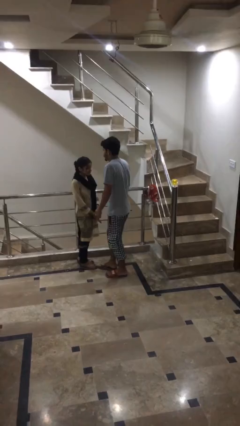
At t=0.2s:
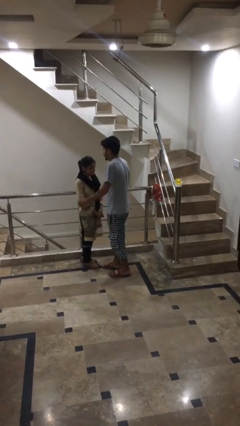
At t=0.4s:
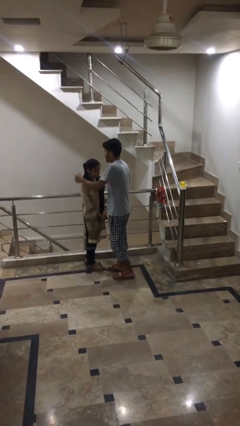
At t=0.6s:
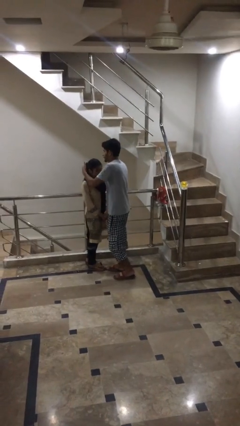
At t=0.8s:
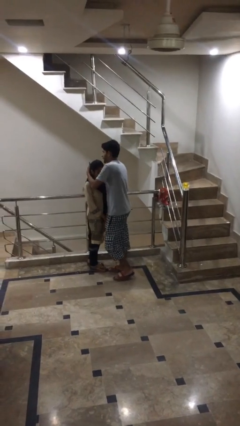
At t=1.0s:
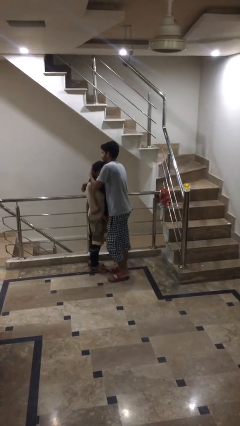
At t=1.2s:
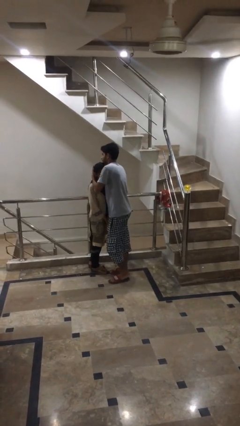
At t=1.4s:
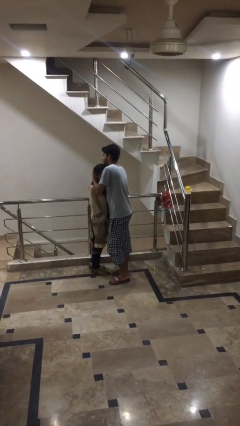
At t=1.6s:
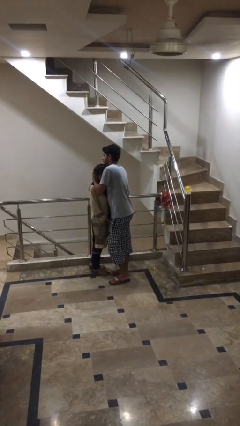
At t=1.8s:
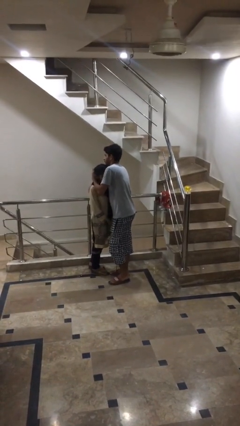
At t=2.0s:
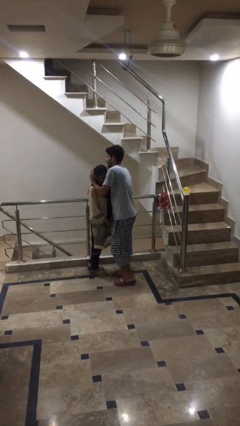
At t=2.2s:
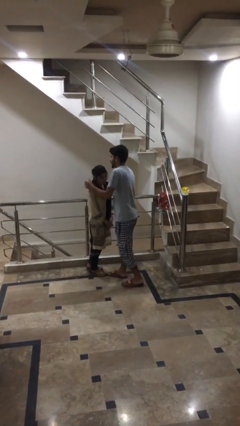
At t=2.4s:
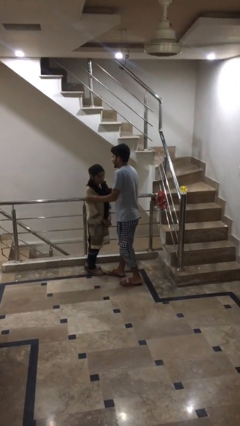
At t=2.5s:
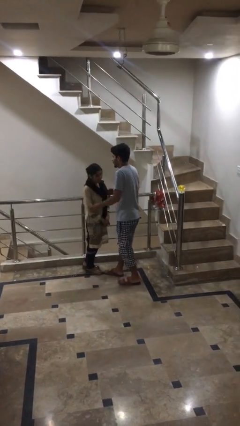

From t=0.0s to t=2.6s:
person embraces person

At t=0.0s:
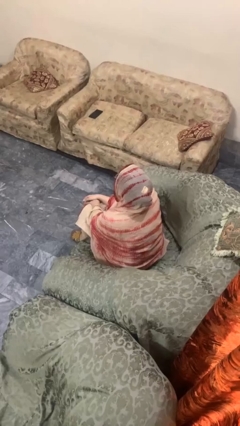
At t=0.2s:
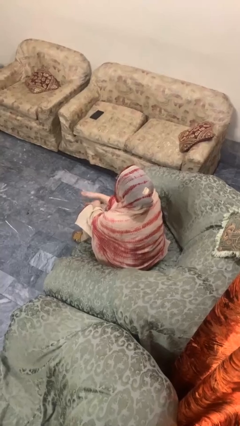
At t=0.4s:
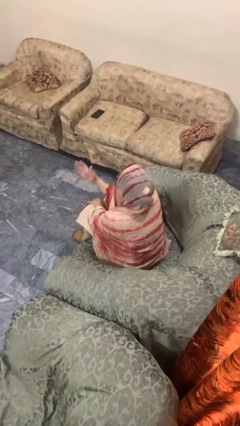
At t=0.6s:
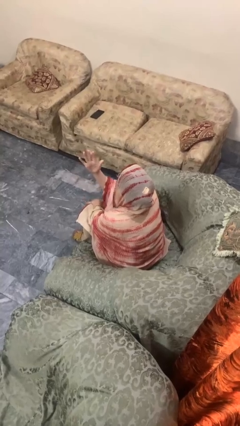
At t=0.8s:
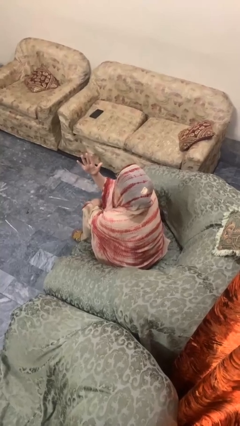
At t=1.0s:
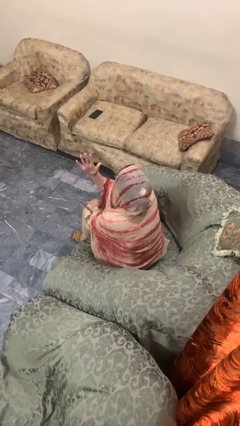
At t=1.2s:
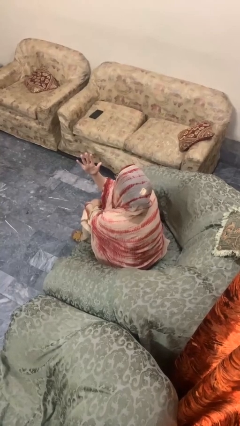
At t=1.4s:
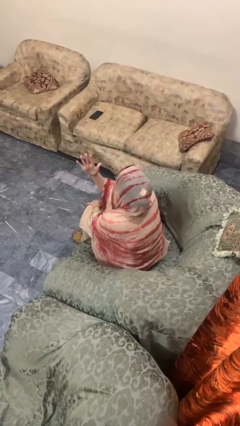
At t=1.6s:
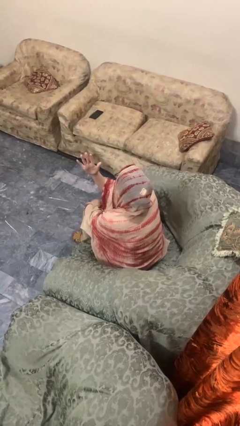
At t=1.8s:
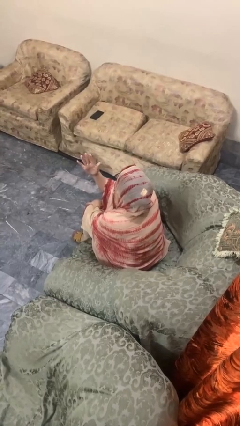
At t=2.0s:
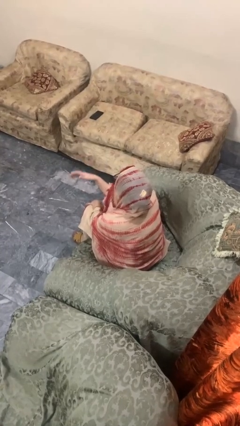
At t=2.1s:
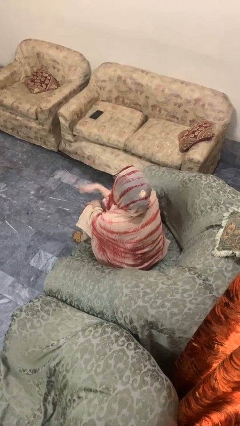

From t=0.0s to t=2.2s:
person gestures number five

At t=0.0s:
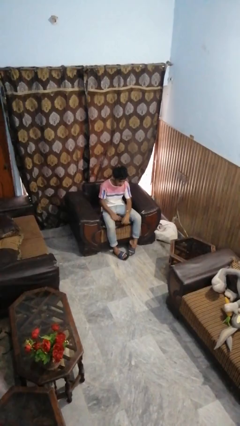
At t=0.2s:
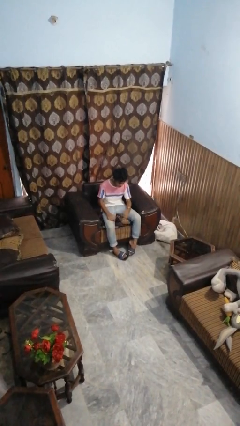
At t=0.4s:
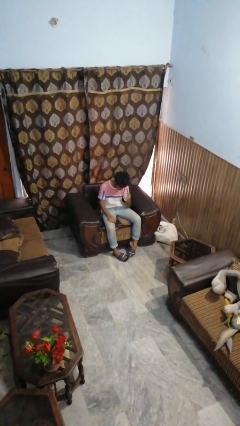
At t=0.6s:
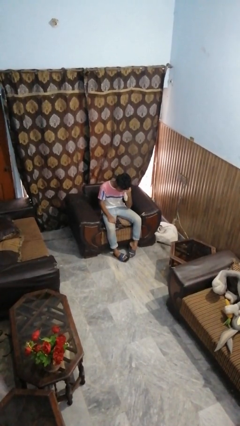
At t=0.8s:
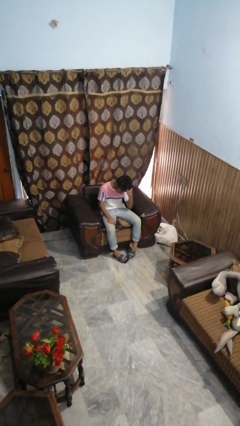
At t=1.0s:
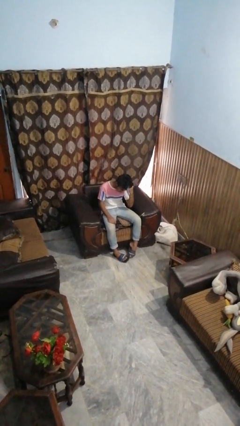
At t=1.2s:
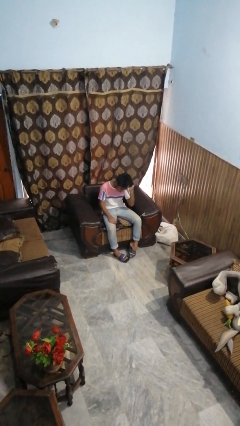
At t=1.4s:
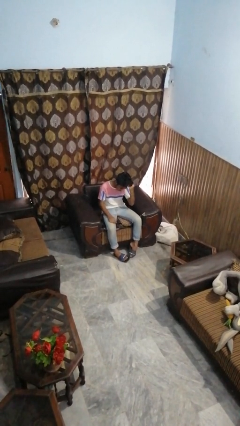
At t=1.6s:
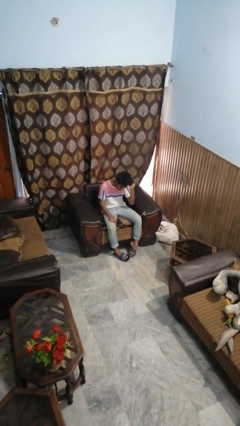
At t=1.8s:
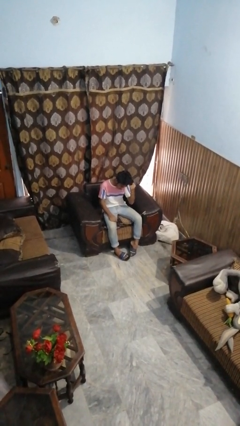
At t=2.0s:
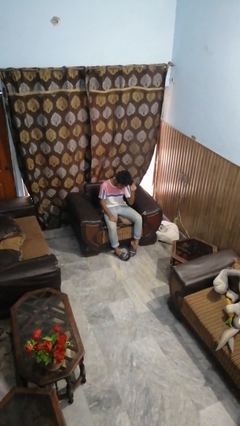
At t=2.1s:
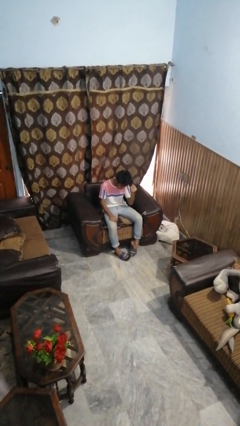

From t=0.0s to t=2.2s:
person strokes hair

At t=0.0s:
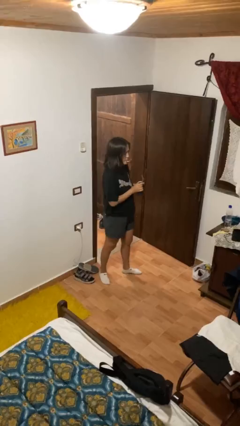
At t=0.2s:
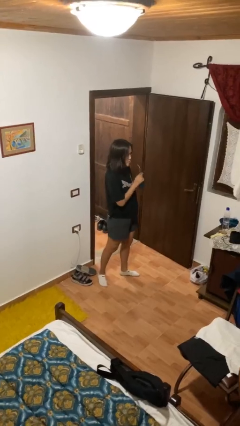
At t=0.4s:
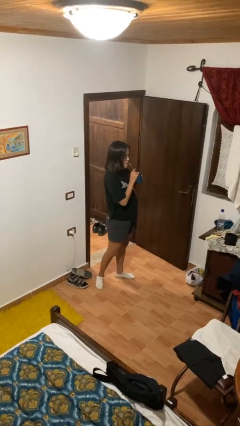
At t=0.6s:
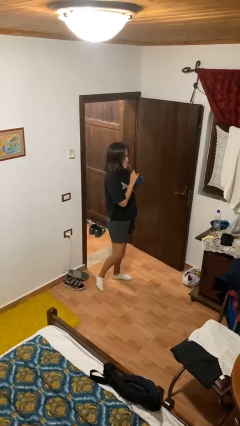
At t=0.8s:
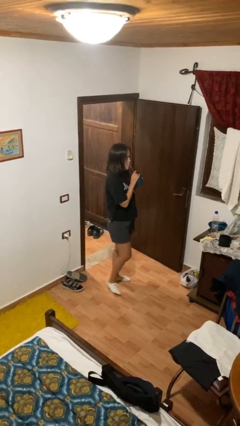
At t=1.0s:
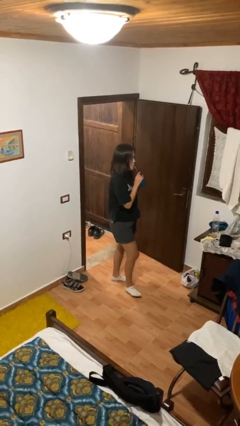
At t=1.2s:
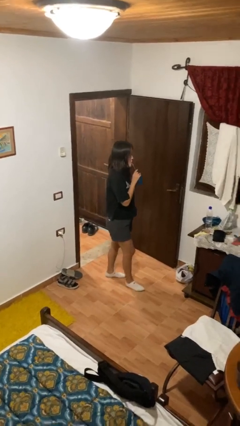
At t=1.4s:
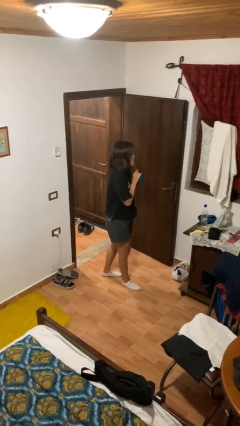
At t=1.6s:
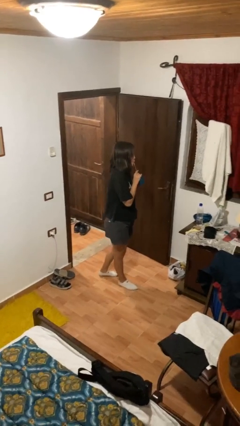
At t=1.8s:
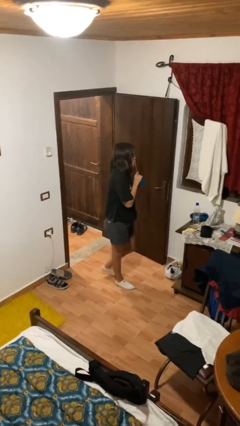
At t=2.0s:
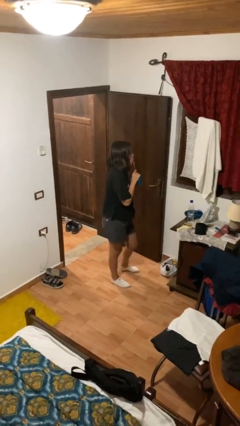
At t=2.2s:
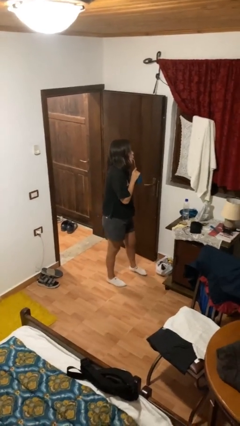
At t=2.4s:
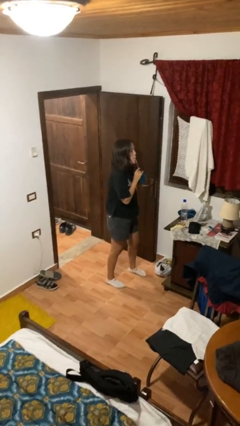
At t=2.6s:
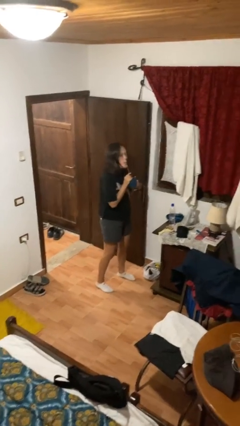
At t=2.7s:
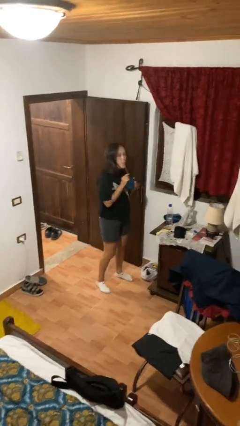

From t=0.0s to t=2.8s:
person drinks from straw

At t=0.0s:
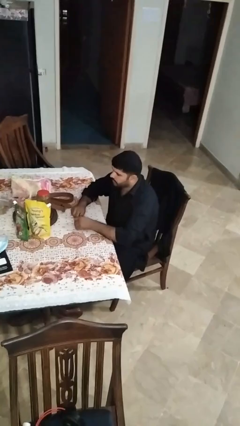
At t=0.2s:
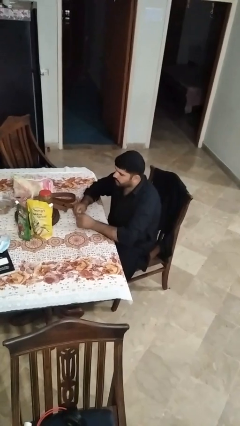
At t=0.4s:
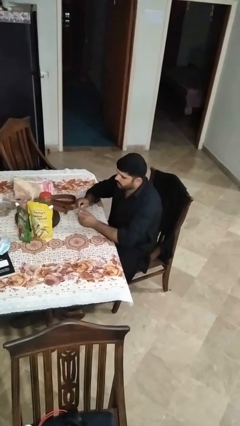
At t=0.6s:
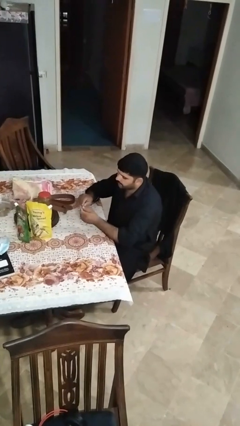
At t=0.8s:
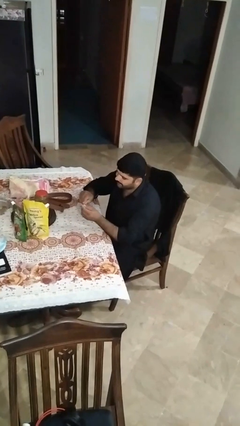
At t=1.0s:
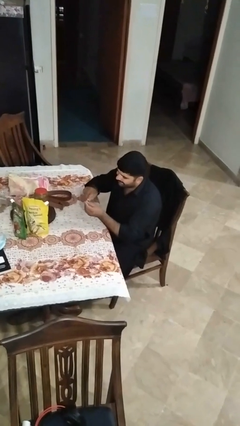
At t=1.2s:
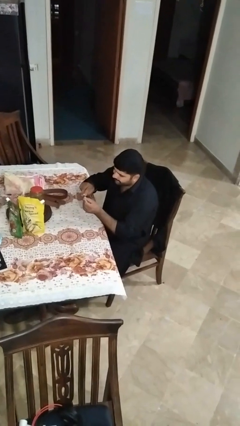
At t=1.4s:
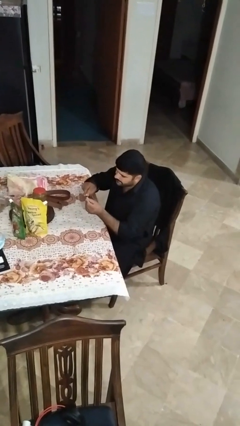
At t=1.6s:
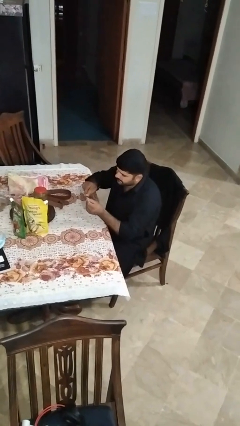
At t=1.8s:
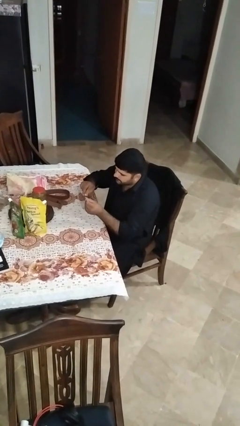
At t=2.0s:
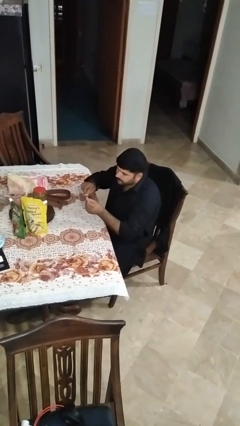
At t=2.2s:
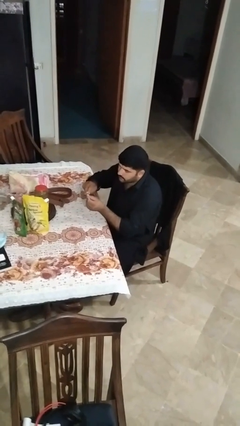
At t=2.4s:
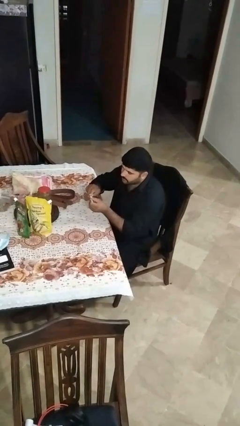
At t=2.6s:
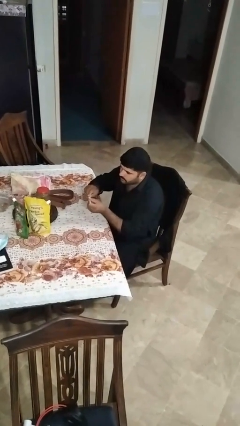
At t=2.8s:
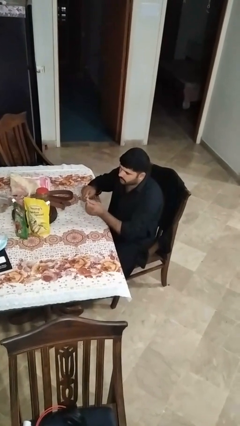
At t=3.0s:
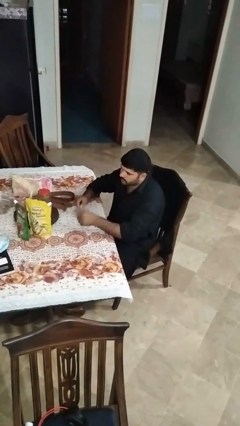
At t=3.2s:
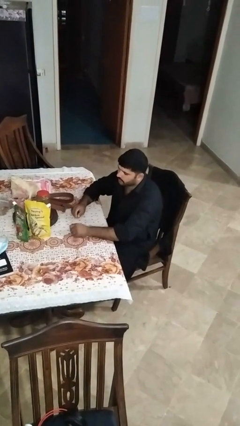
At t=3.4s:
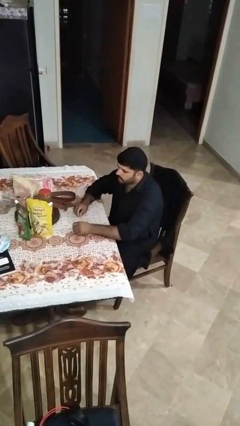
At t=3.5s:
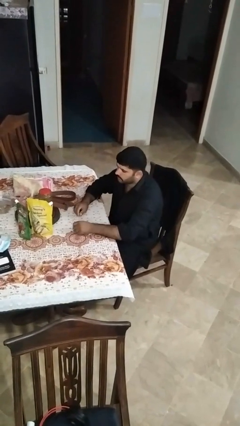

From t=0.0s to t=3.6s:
person files fingernails

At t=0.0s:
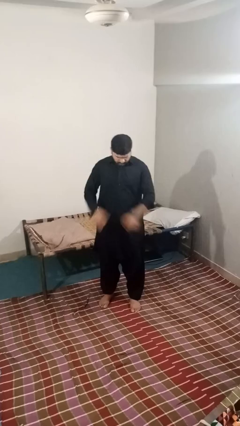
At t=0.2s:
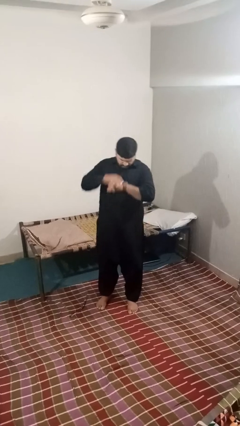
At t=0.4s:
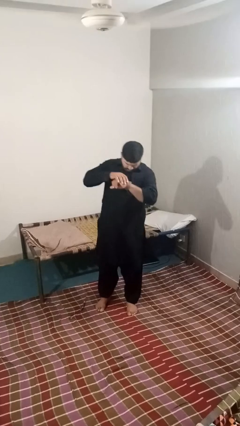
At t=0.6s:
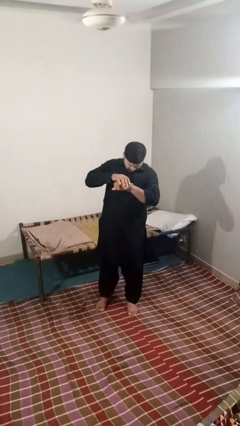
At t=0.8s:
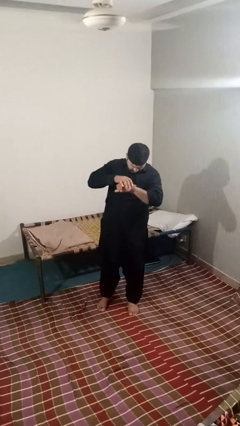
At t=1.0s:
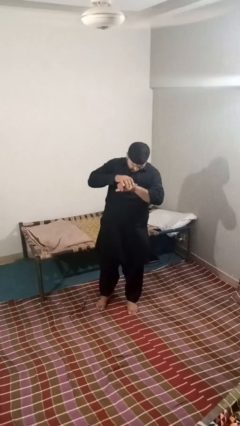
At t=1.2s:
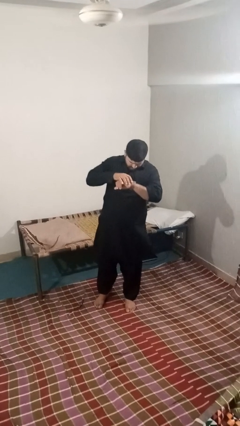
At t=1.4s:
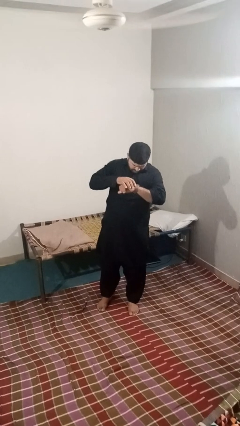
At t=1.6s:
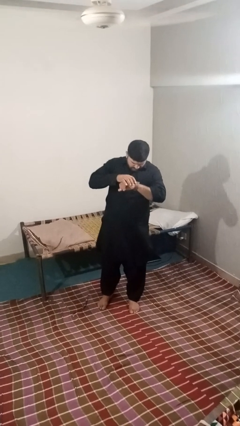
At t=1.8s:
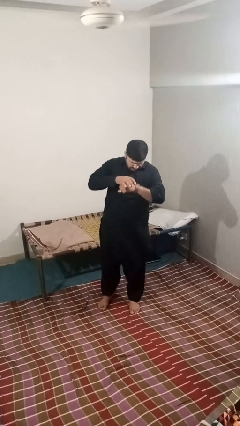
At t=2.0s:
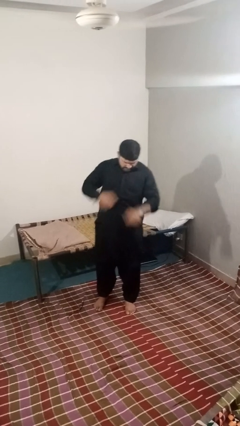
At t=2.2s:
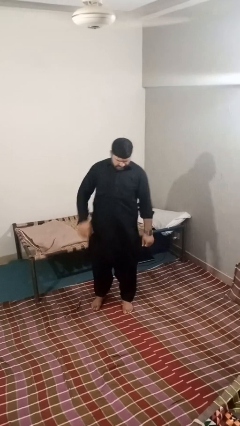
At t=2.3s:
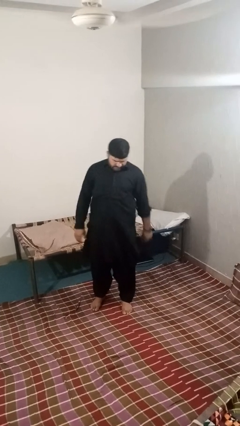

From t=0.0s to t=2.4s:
person looks at wristwatch

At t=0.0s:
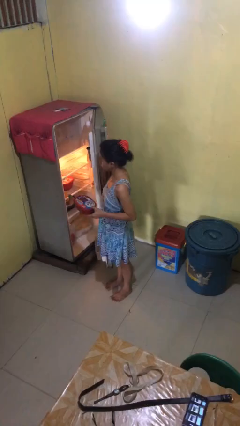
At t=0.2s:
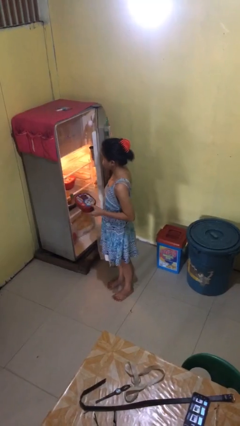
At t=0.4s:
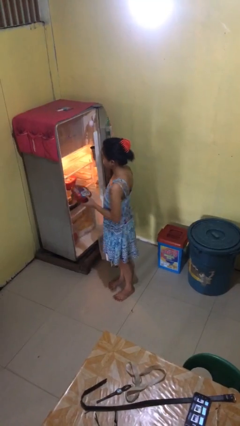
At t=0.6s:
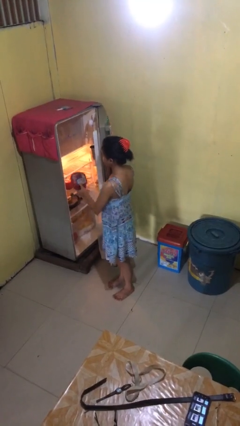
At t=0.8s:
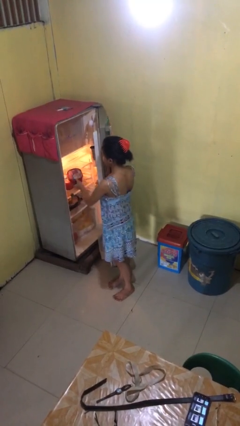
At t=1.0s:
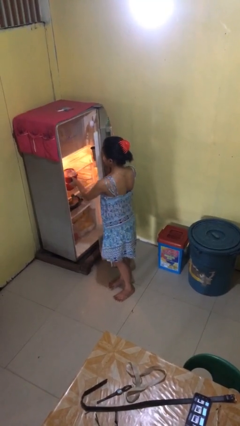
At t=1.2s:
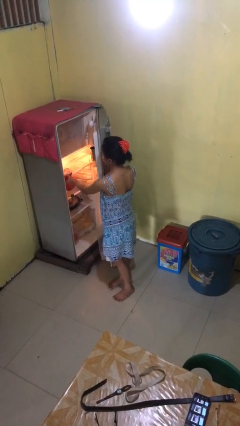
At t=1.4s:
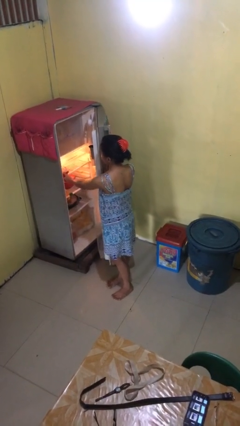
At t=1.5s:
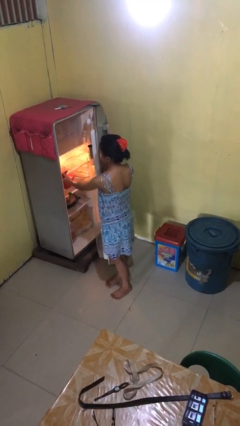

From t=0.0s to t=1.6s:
person puts object into refrigerator
